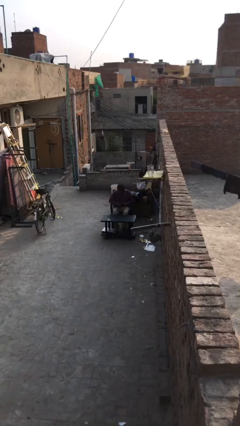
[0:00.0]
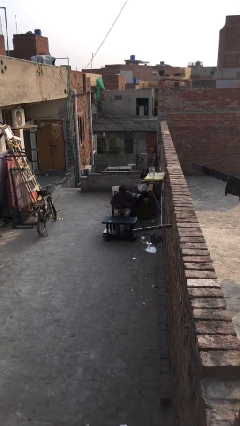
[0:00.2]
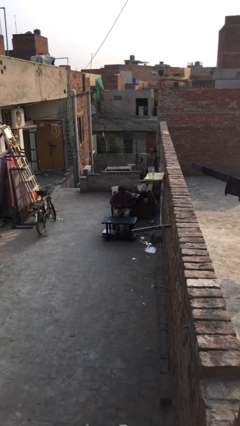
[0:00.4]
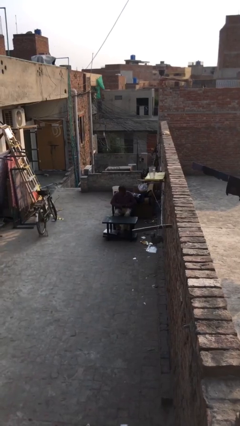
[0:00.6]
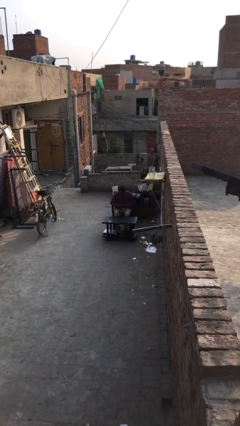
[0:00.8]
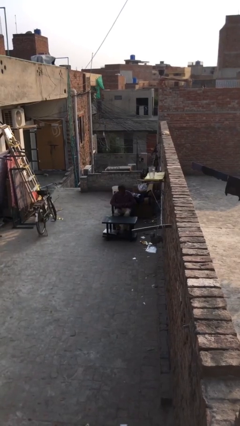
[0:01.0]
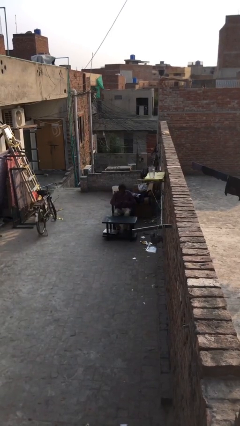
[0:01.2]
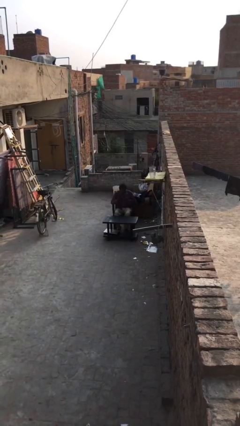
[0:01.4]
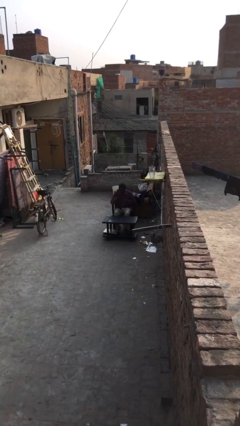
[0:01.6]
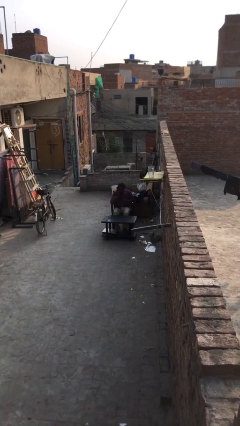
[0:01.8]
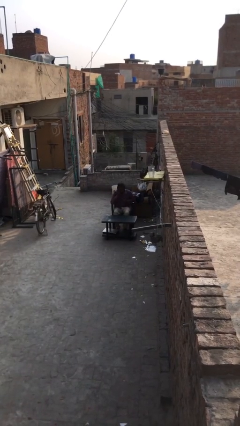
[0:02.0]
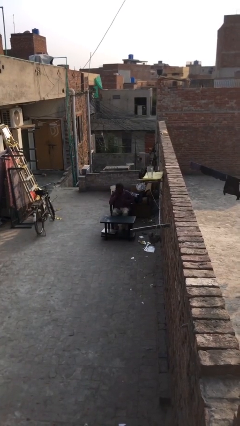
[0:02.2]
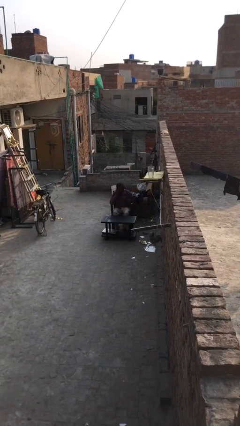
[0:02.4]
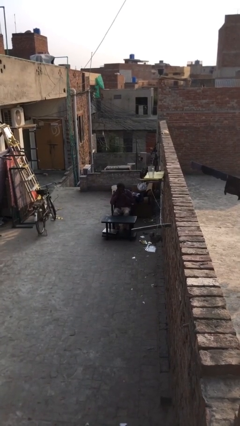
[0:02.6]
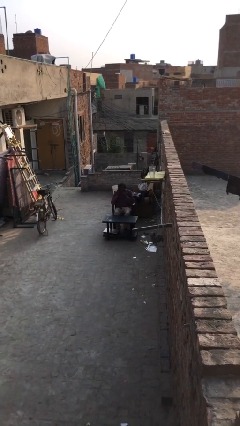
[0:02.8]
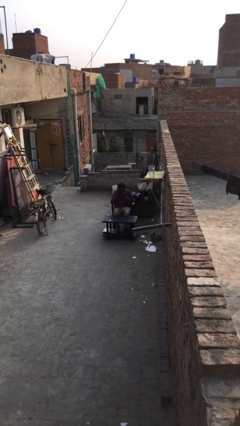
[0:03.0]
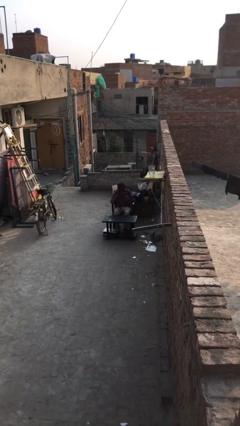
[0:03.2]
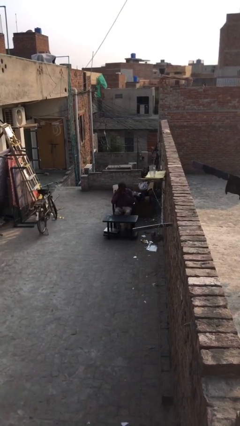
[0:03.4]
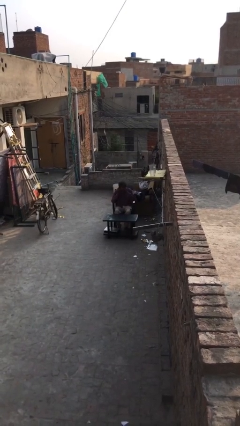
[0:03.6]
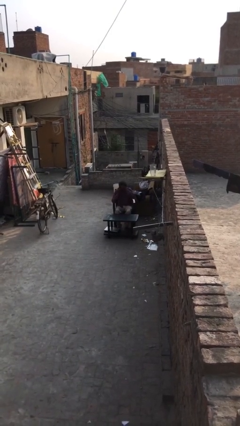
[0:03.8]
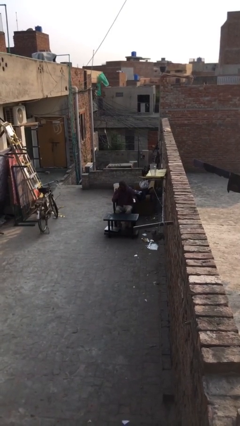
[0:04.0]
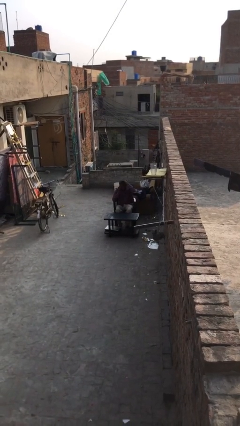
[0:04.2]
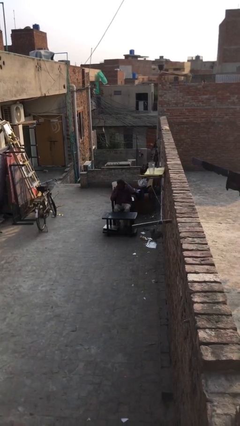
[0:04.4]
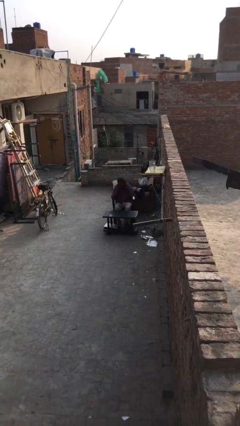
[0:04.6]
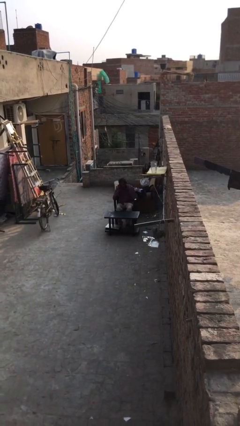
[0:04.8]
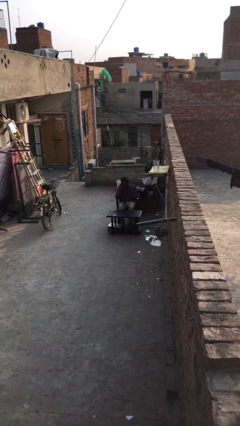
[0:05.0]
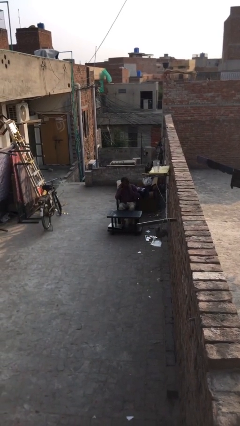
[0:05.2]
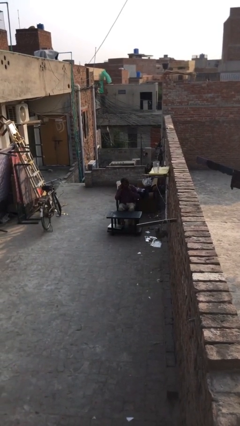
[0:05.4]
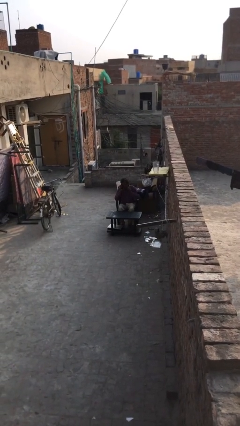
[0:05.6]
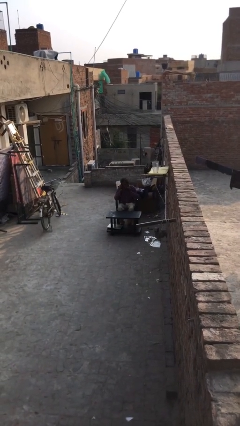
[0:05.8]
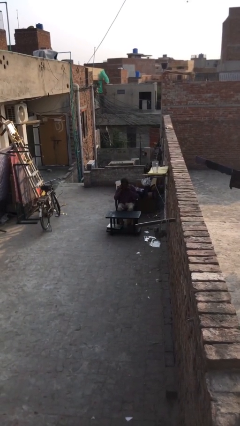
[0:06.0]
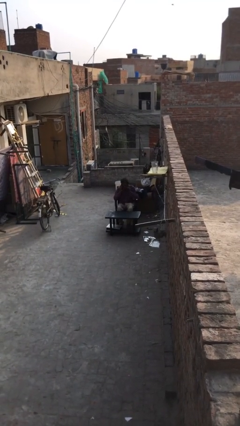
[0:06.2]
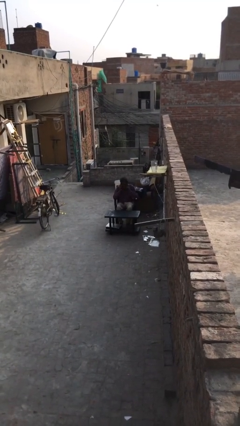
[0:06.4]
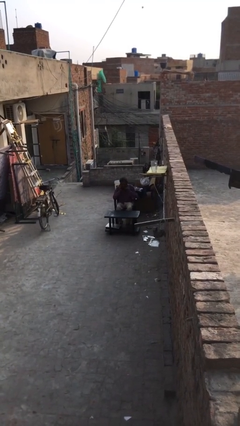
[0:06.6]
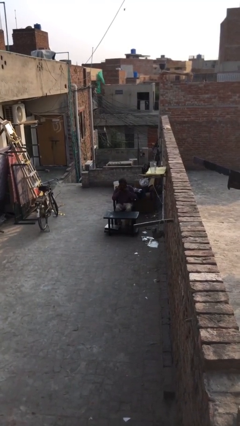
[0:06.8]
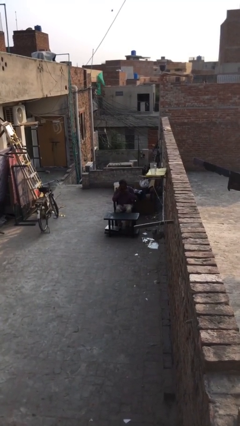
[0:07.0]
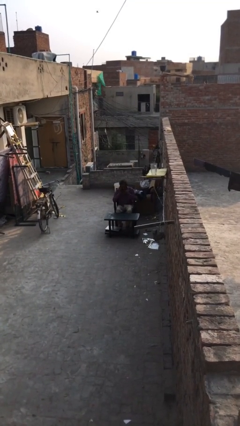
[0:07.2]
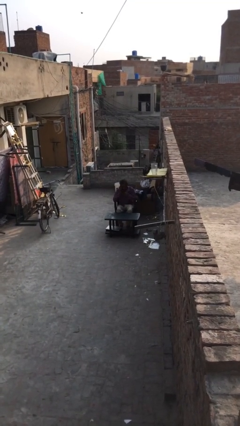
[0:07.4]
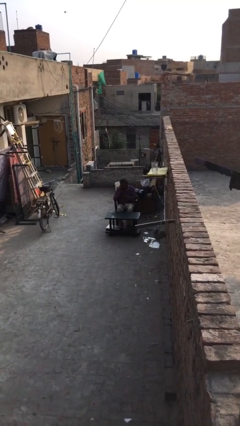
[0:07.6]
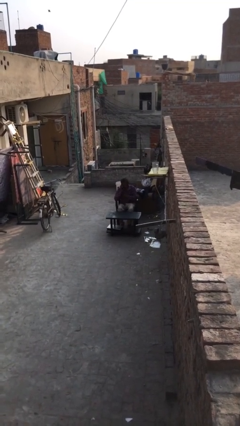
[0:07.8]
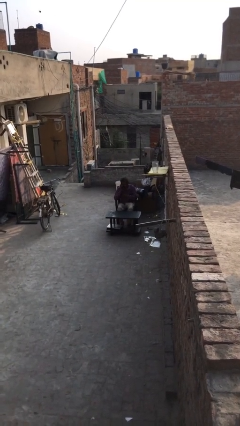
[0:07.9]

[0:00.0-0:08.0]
person talks on phone

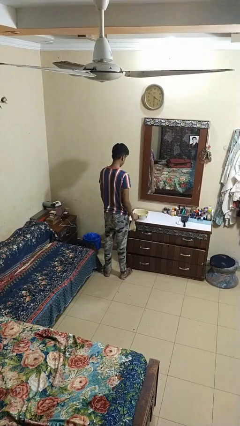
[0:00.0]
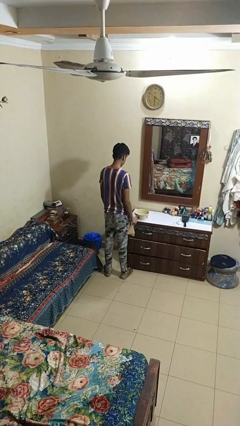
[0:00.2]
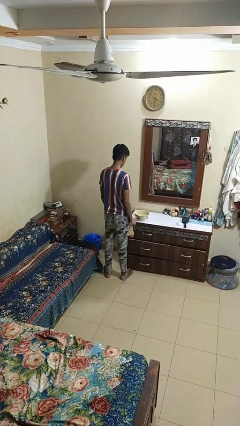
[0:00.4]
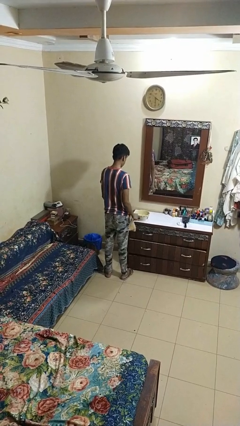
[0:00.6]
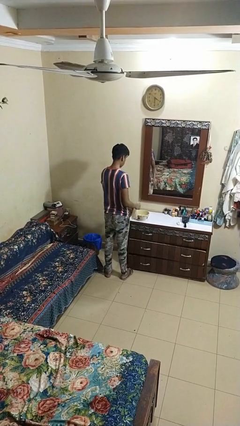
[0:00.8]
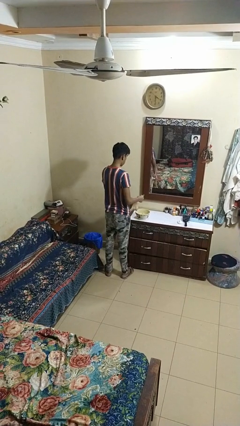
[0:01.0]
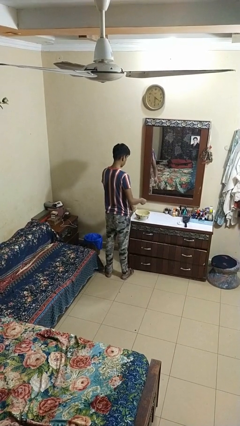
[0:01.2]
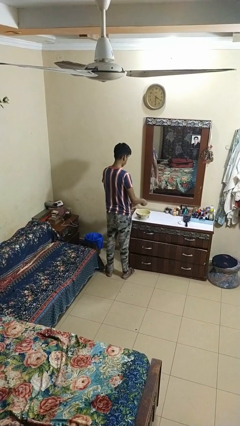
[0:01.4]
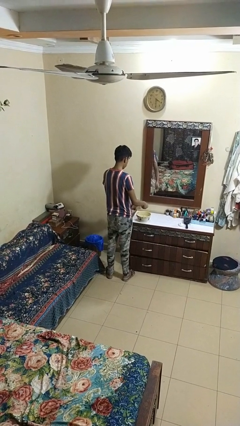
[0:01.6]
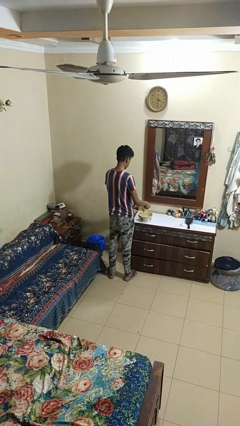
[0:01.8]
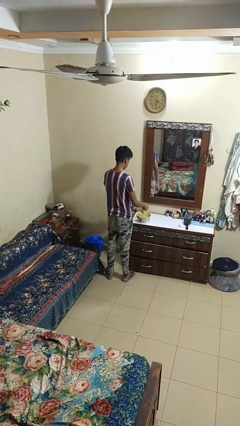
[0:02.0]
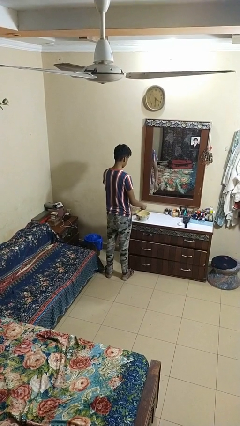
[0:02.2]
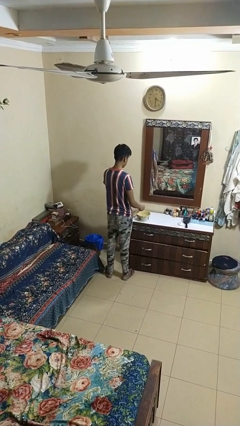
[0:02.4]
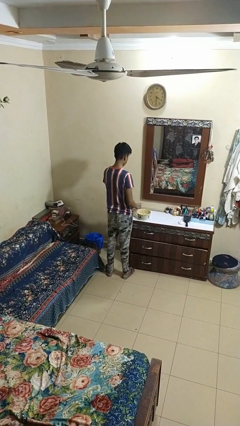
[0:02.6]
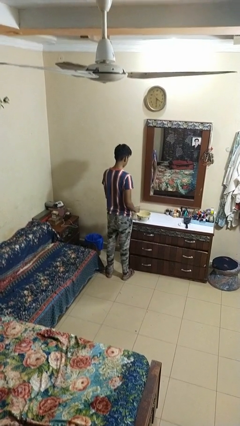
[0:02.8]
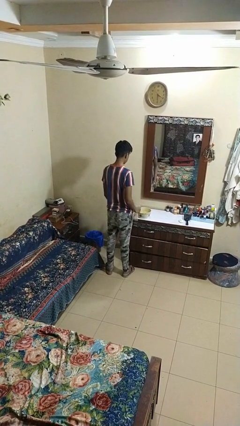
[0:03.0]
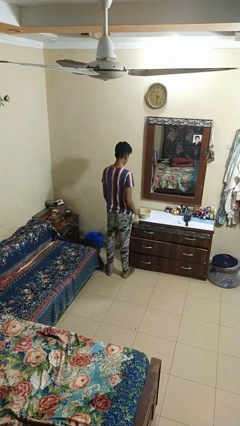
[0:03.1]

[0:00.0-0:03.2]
person pours into bowl

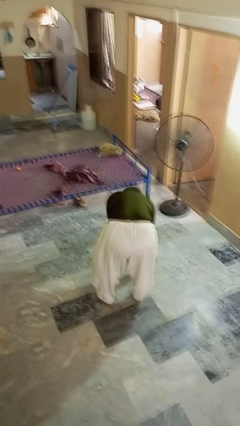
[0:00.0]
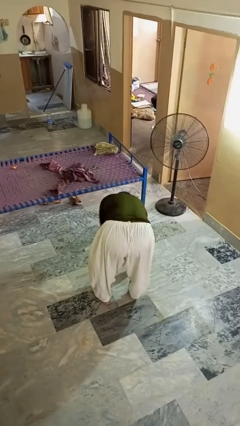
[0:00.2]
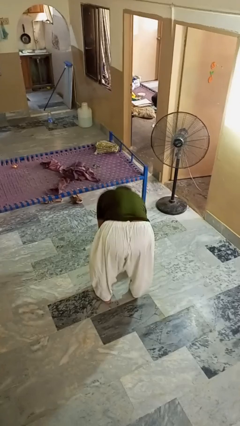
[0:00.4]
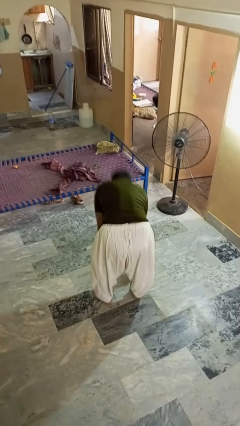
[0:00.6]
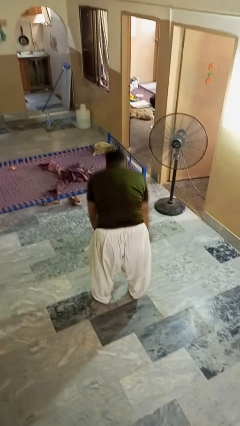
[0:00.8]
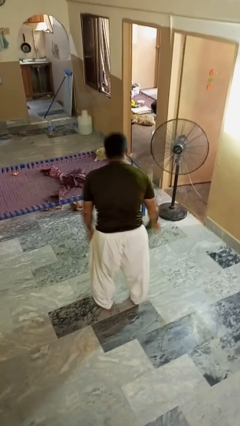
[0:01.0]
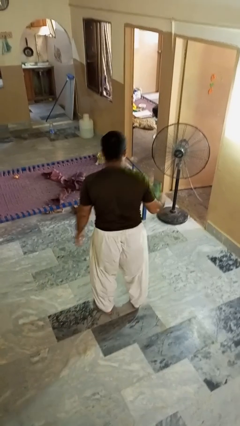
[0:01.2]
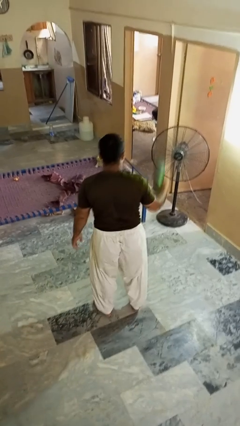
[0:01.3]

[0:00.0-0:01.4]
person picks up object from floor

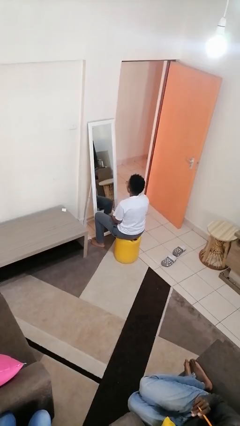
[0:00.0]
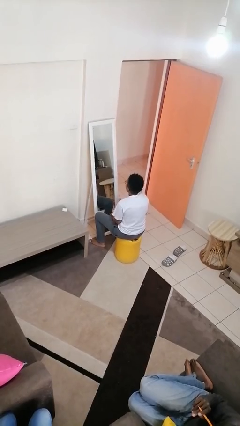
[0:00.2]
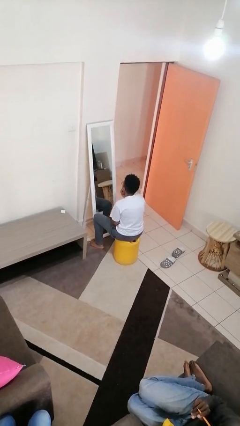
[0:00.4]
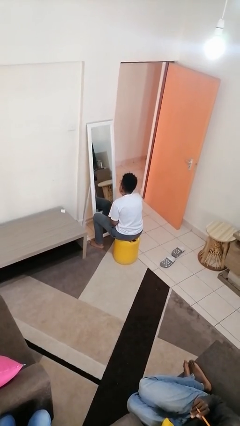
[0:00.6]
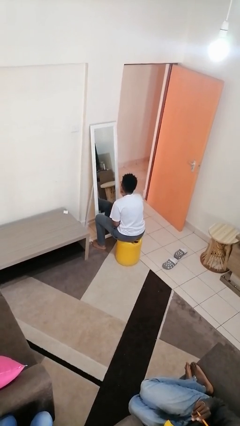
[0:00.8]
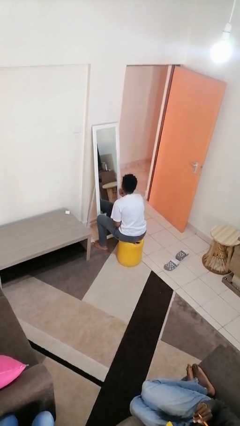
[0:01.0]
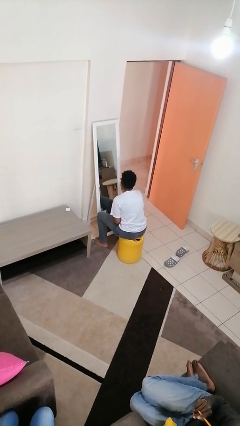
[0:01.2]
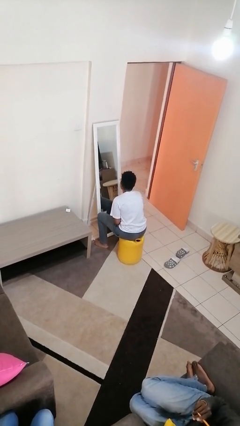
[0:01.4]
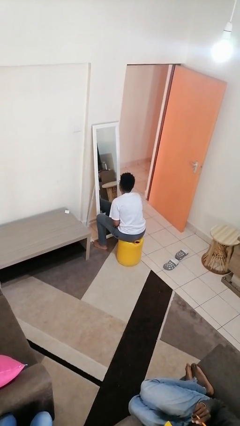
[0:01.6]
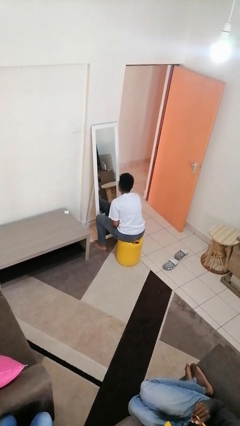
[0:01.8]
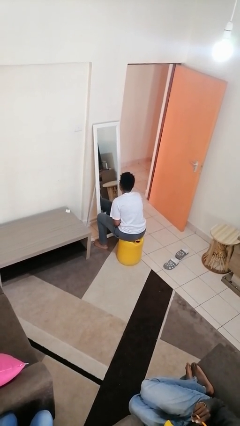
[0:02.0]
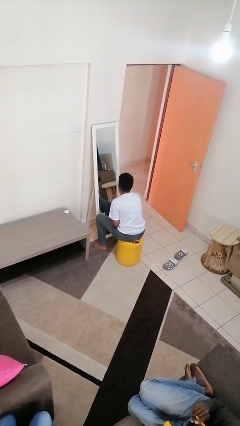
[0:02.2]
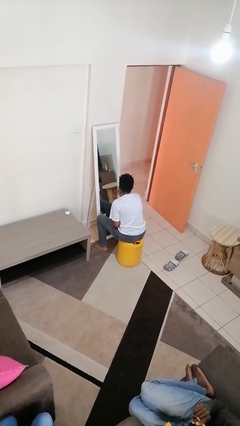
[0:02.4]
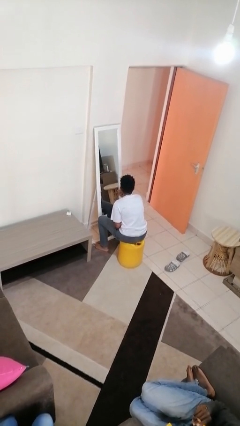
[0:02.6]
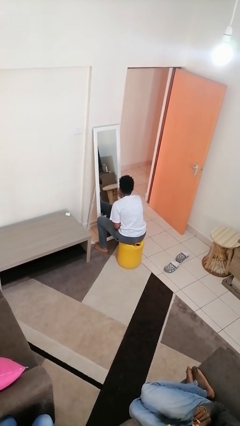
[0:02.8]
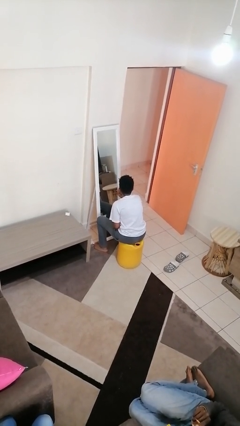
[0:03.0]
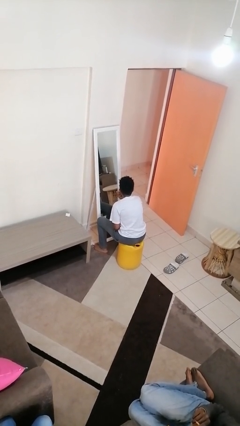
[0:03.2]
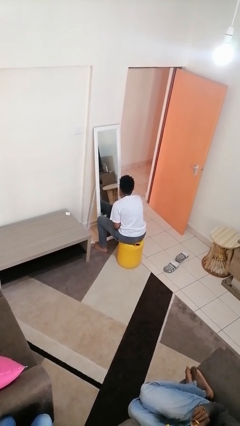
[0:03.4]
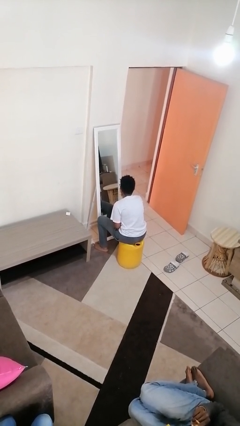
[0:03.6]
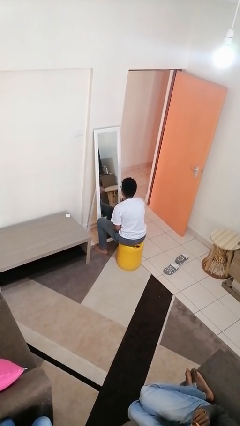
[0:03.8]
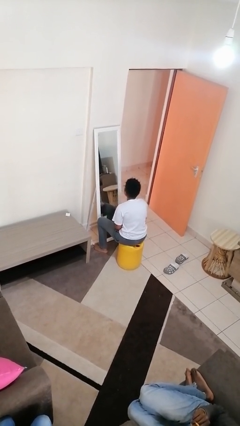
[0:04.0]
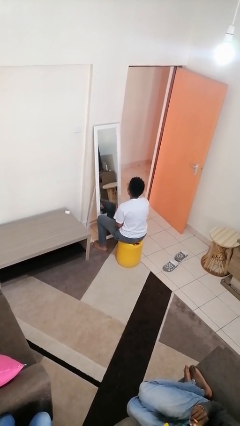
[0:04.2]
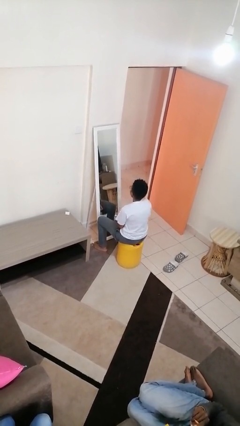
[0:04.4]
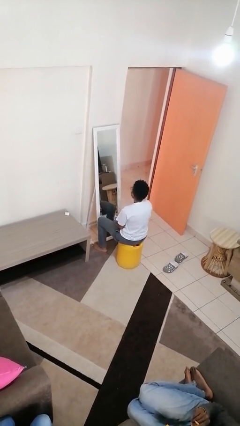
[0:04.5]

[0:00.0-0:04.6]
person applies lip makeup
